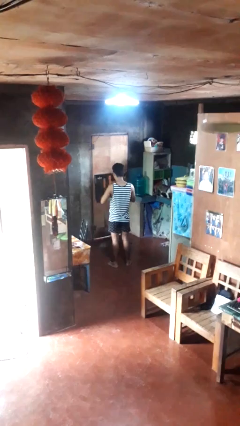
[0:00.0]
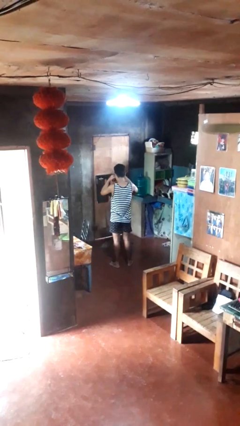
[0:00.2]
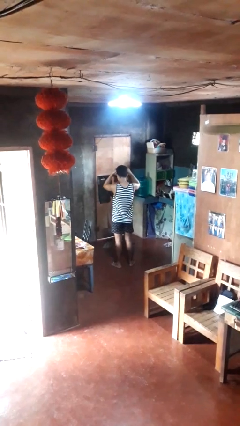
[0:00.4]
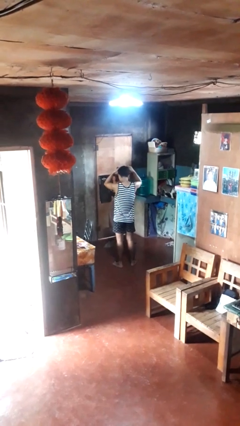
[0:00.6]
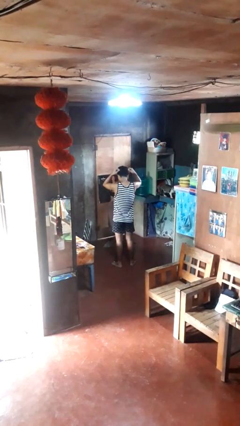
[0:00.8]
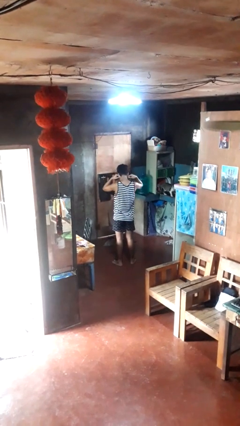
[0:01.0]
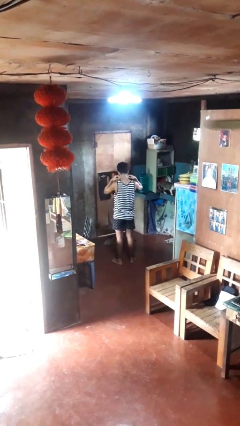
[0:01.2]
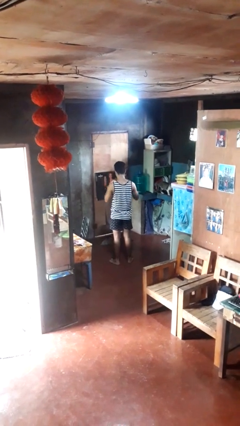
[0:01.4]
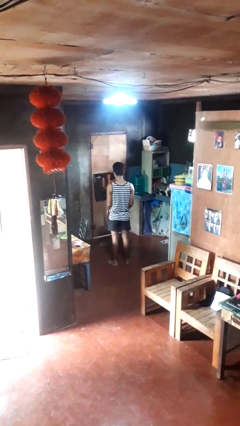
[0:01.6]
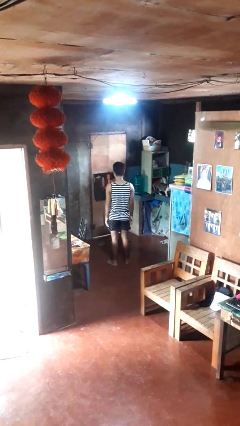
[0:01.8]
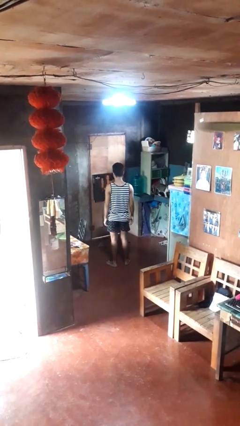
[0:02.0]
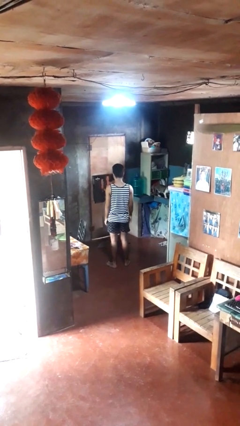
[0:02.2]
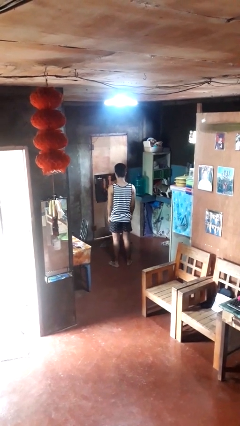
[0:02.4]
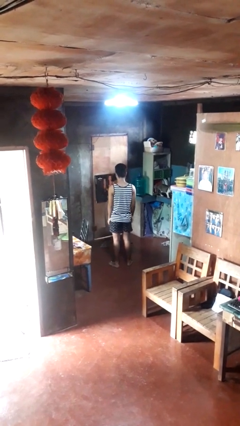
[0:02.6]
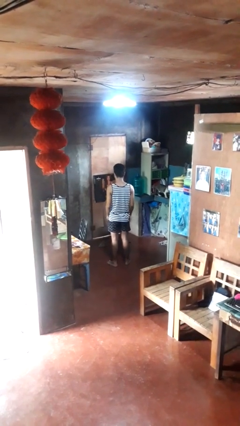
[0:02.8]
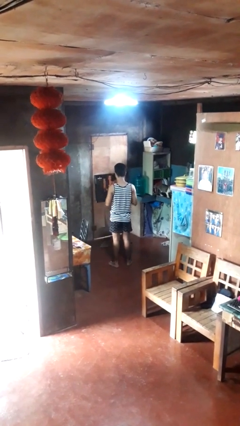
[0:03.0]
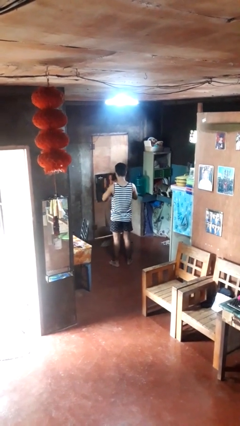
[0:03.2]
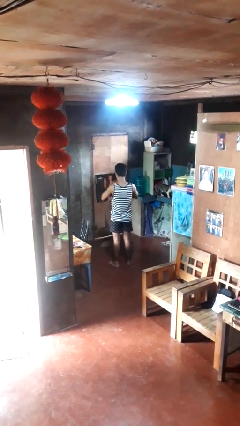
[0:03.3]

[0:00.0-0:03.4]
person puts on necklace

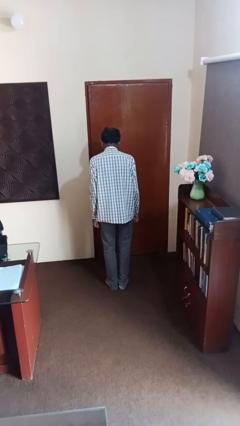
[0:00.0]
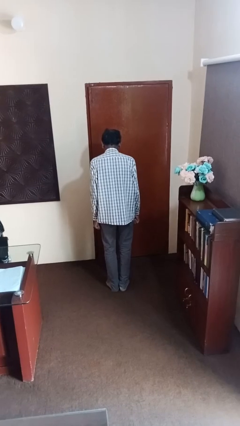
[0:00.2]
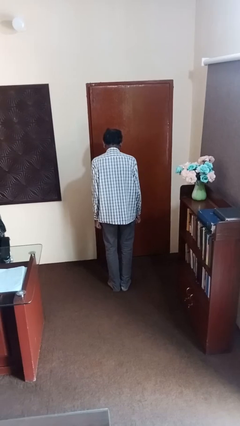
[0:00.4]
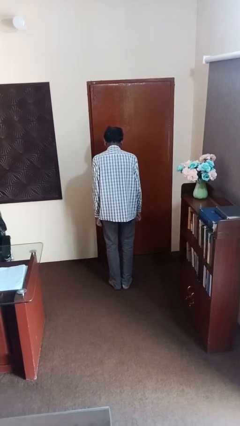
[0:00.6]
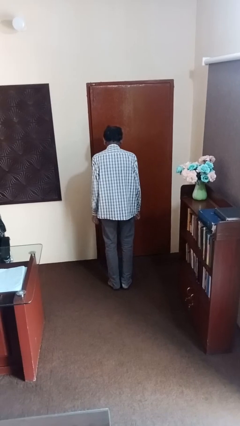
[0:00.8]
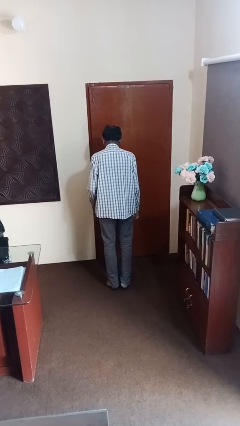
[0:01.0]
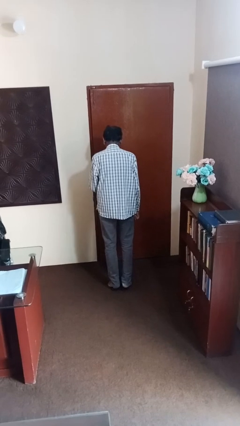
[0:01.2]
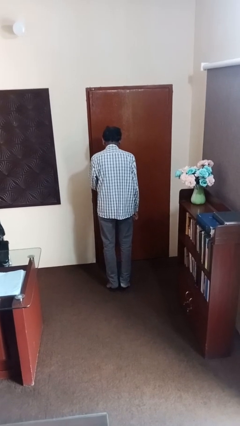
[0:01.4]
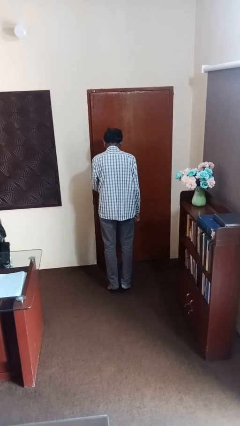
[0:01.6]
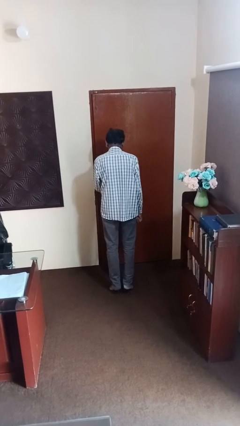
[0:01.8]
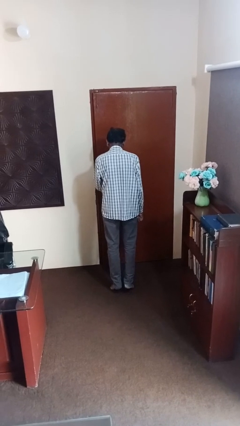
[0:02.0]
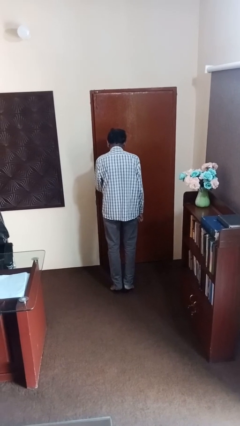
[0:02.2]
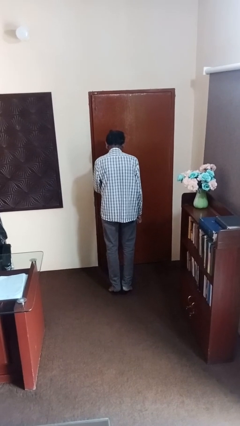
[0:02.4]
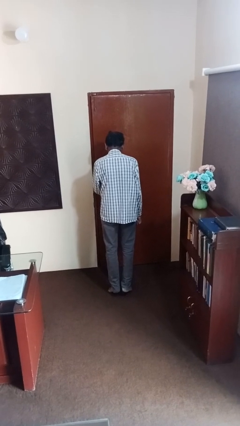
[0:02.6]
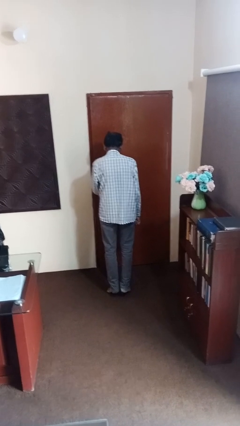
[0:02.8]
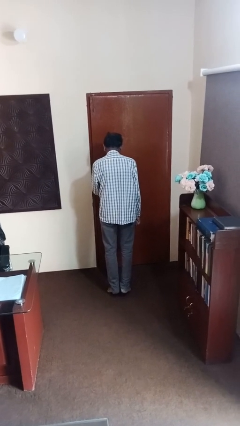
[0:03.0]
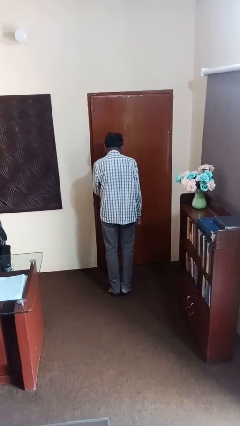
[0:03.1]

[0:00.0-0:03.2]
person walks tiptoe

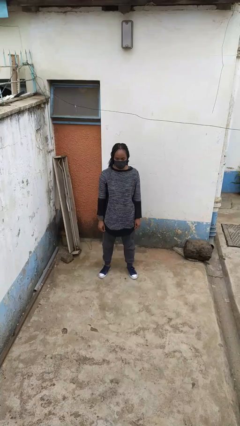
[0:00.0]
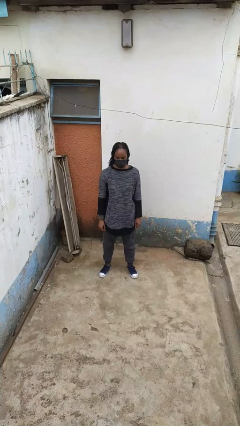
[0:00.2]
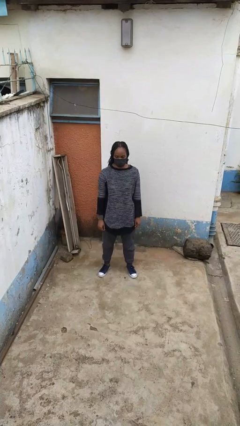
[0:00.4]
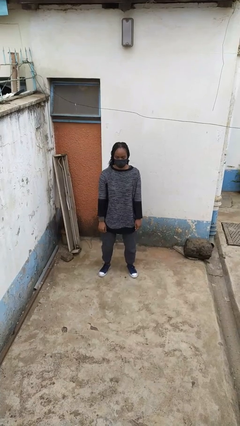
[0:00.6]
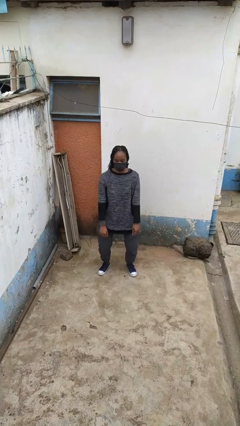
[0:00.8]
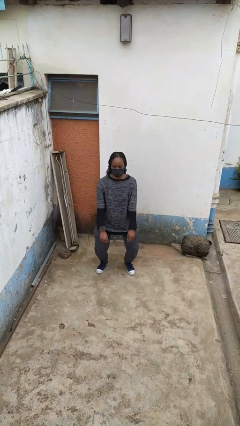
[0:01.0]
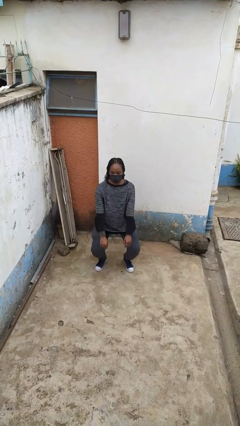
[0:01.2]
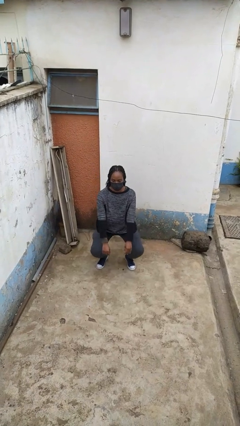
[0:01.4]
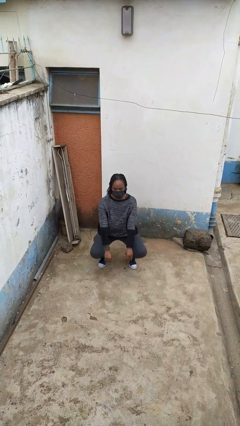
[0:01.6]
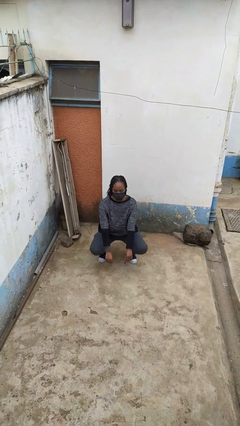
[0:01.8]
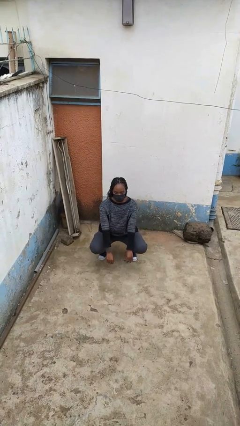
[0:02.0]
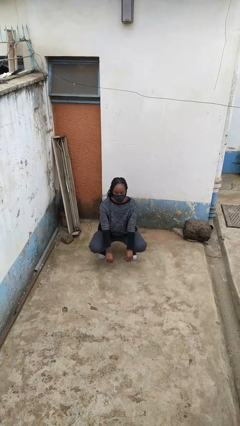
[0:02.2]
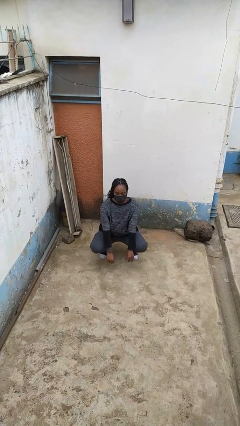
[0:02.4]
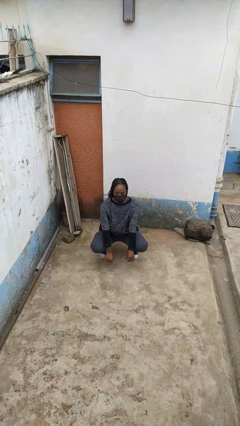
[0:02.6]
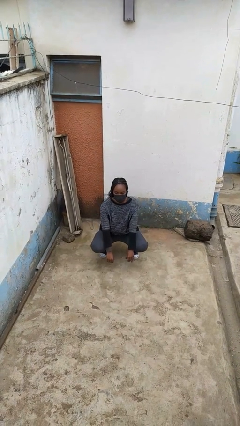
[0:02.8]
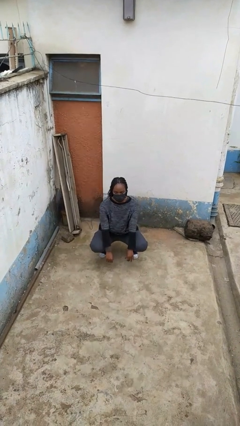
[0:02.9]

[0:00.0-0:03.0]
person squats

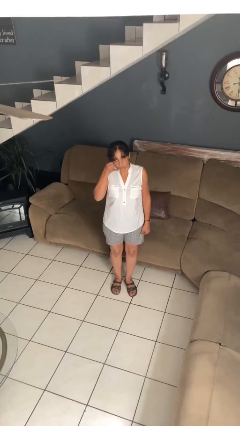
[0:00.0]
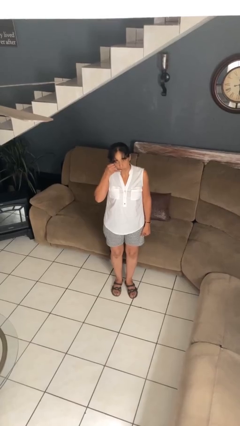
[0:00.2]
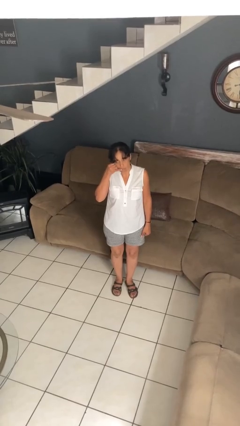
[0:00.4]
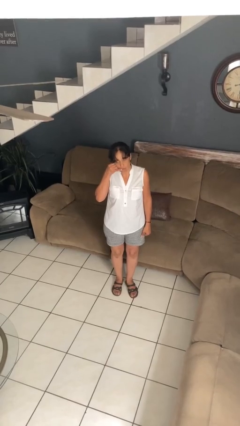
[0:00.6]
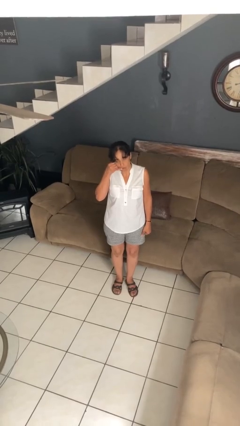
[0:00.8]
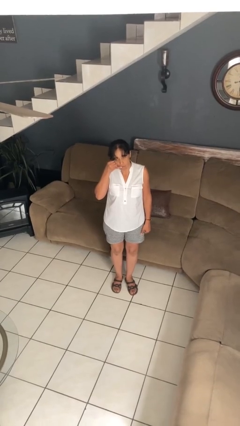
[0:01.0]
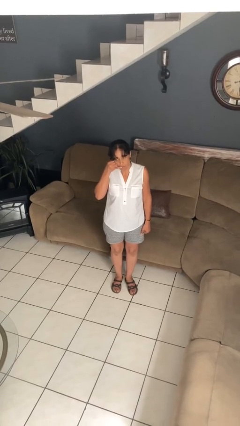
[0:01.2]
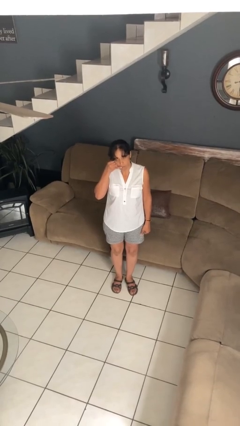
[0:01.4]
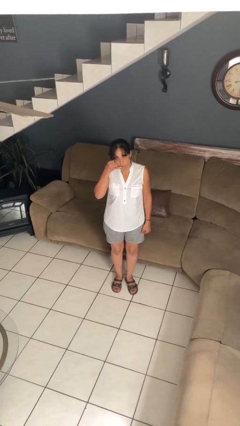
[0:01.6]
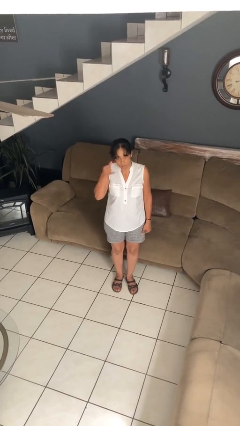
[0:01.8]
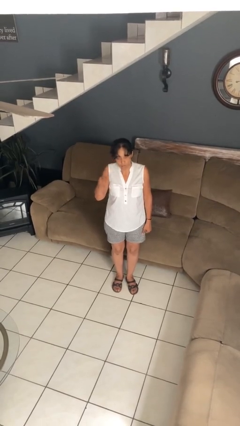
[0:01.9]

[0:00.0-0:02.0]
person gestures call me

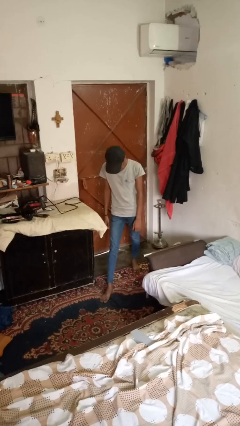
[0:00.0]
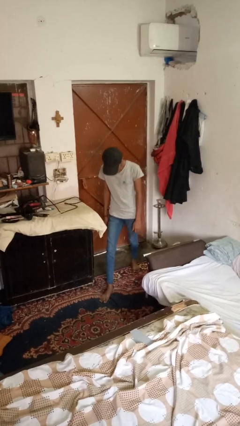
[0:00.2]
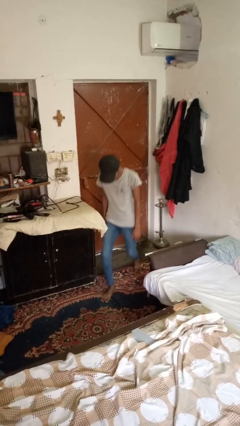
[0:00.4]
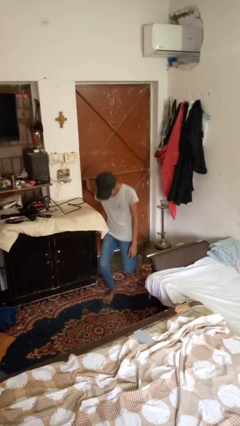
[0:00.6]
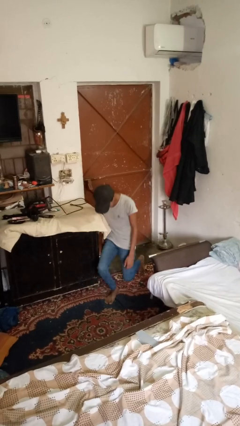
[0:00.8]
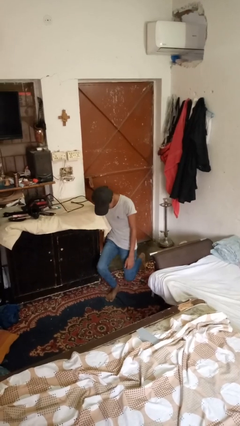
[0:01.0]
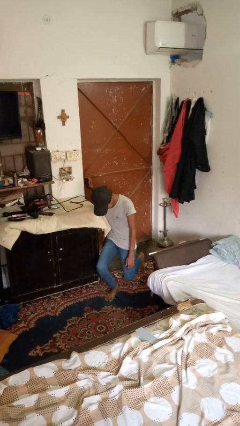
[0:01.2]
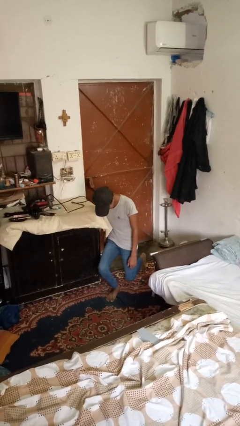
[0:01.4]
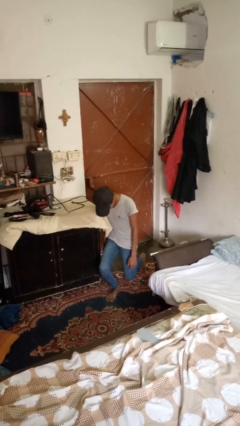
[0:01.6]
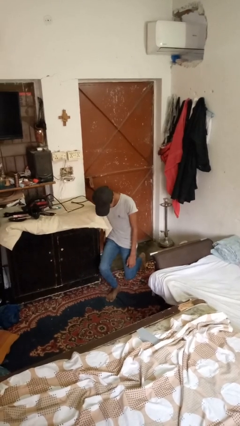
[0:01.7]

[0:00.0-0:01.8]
person exercises with lunges

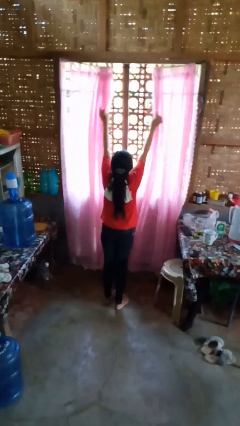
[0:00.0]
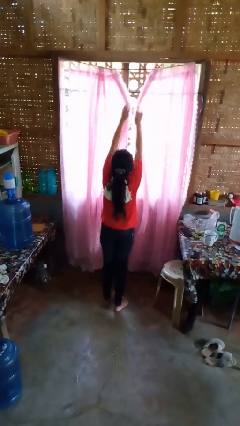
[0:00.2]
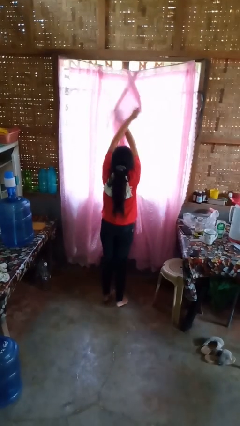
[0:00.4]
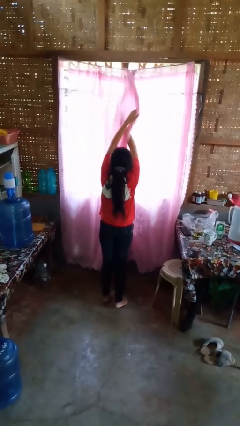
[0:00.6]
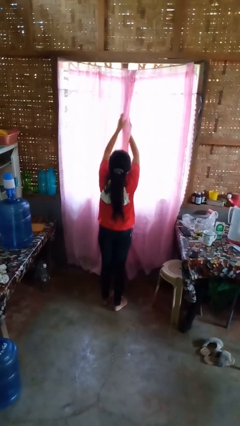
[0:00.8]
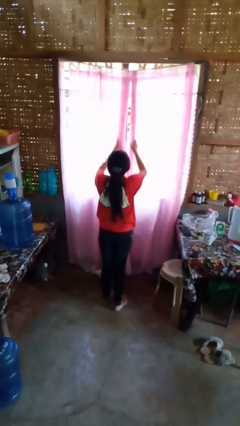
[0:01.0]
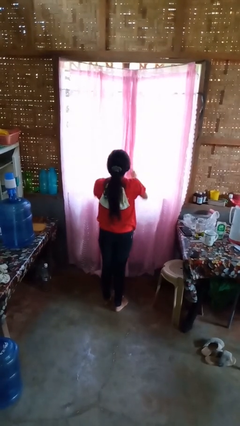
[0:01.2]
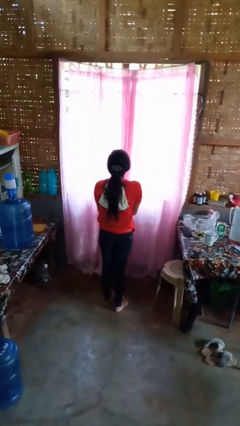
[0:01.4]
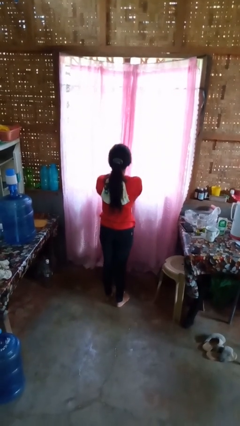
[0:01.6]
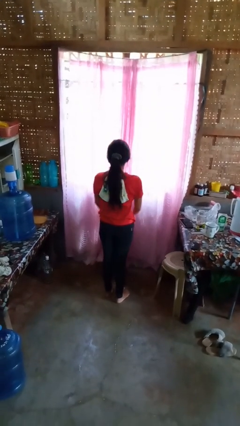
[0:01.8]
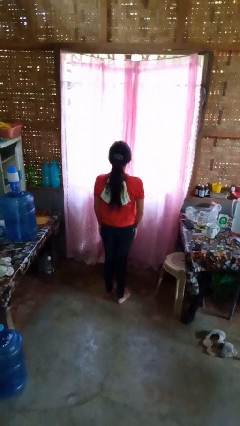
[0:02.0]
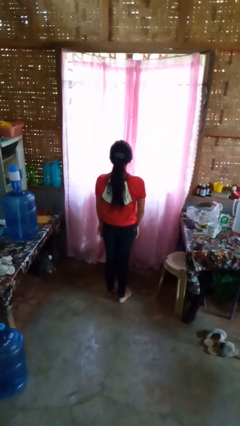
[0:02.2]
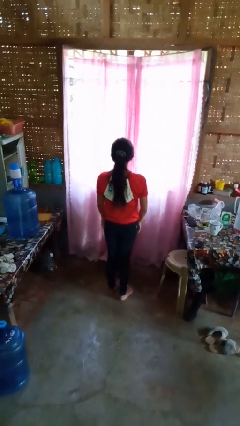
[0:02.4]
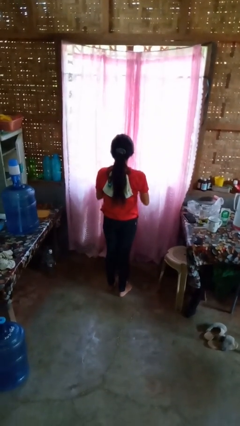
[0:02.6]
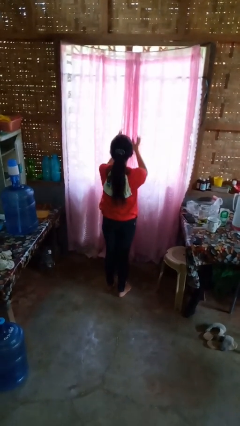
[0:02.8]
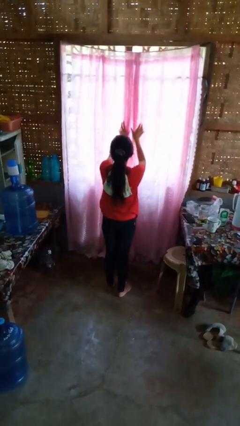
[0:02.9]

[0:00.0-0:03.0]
person closes curtains

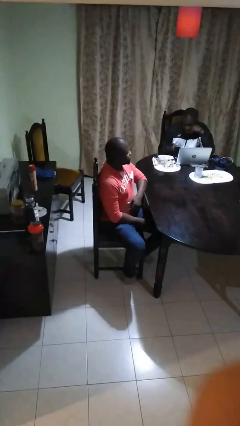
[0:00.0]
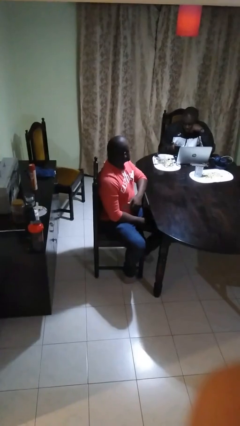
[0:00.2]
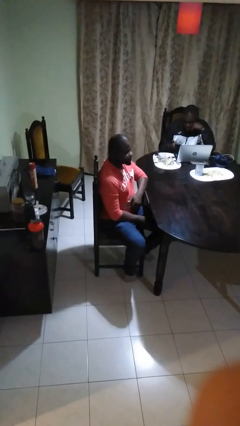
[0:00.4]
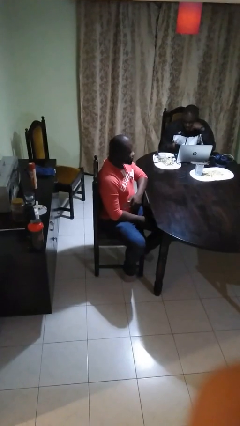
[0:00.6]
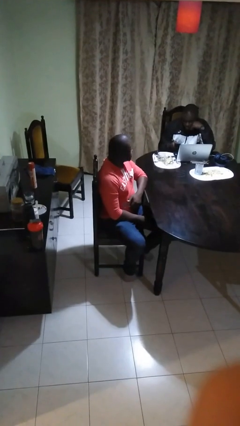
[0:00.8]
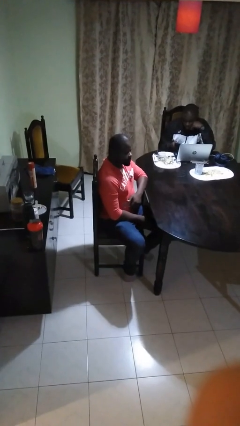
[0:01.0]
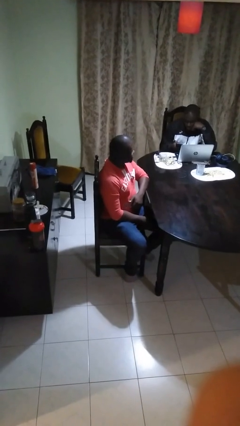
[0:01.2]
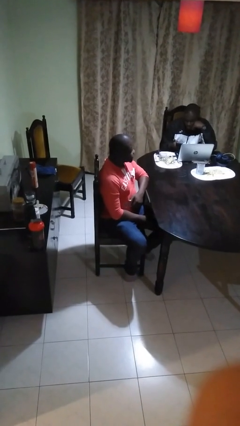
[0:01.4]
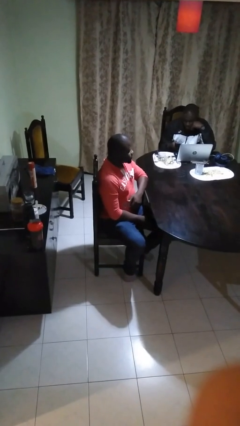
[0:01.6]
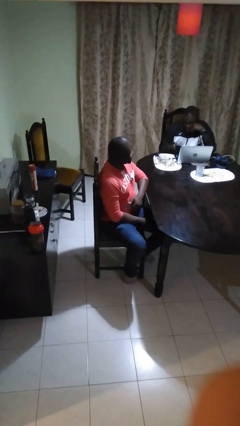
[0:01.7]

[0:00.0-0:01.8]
person shakes head
